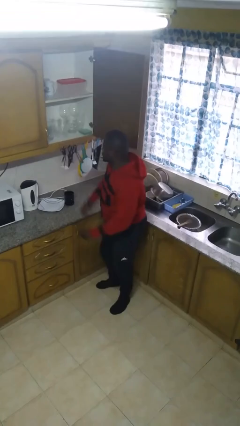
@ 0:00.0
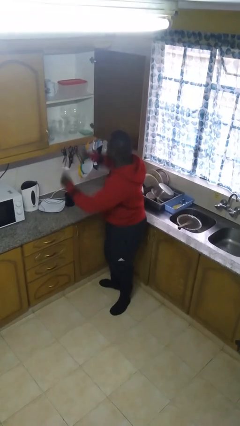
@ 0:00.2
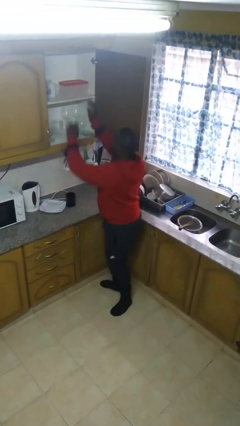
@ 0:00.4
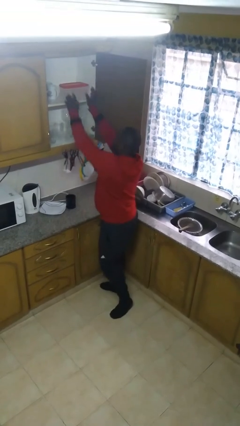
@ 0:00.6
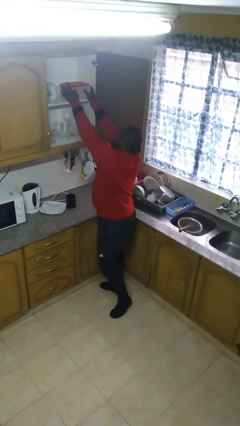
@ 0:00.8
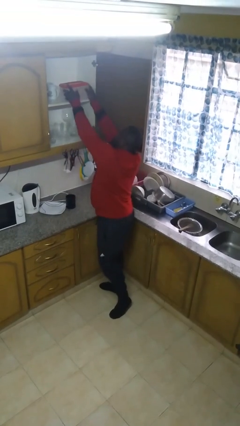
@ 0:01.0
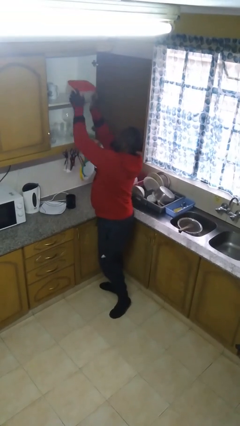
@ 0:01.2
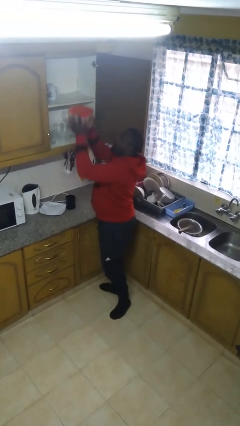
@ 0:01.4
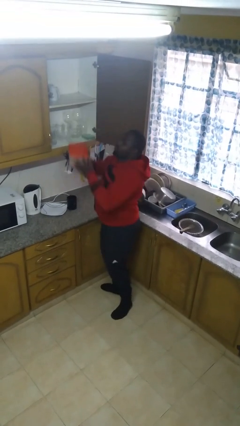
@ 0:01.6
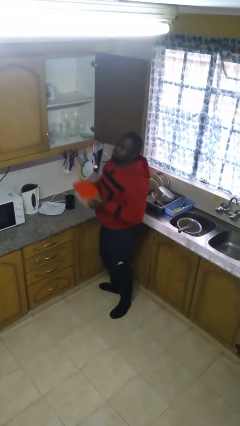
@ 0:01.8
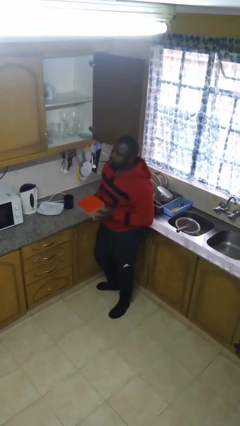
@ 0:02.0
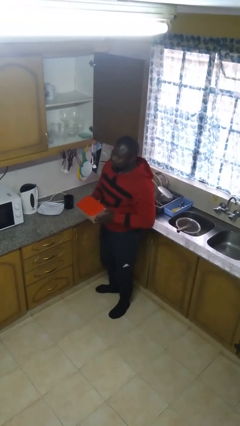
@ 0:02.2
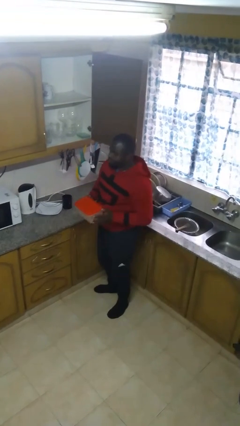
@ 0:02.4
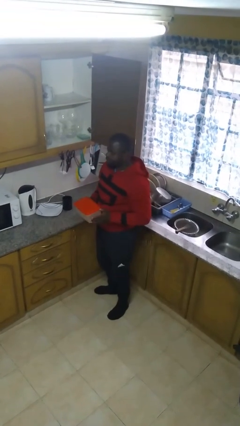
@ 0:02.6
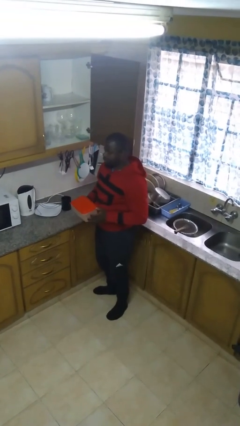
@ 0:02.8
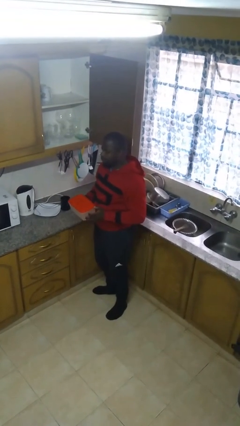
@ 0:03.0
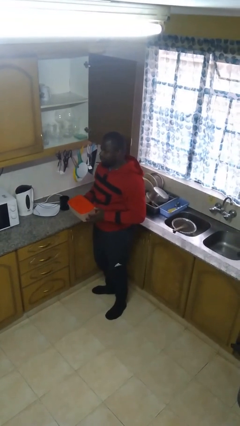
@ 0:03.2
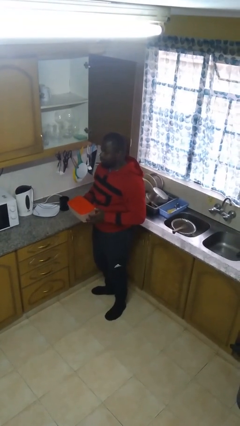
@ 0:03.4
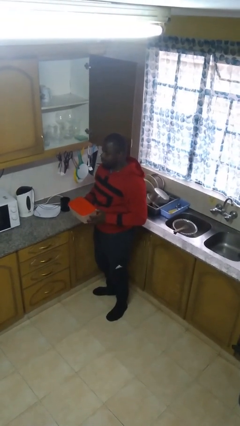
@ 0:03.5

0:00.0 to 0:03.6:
person picks up object from cabinet

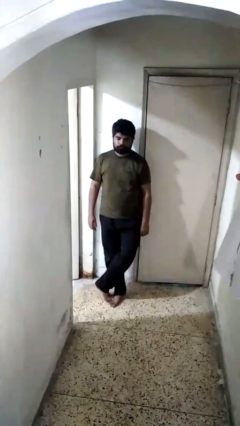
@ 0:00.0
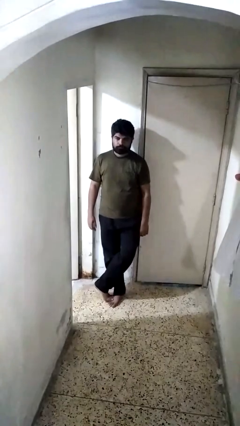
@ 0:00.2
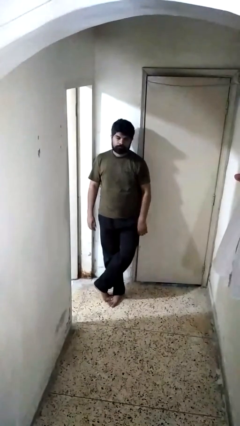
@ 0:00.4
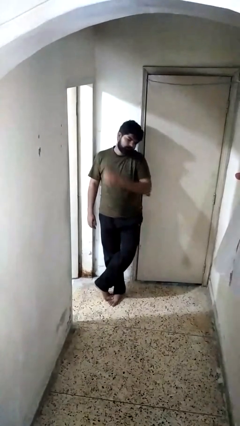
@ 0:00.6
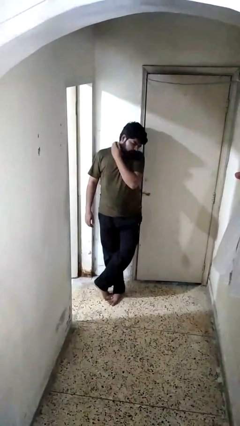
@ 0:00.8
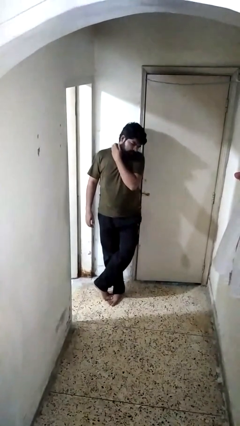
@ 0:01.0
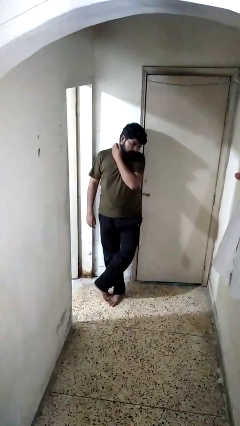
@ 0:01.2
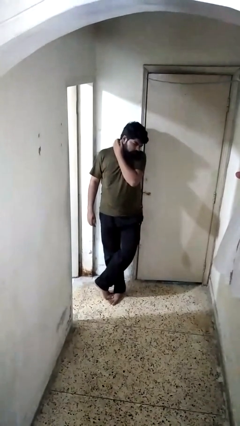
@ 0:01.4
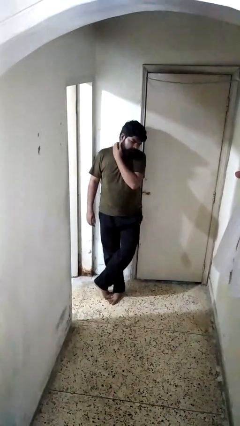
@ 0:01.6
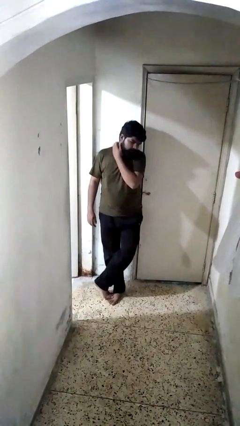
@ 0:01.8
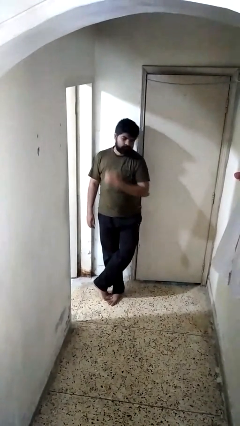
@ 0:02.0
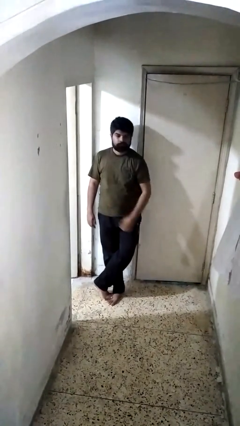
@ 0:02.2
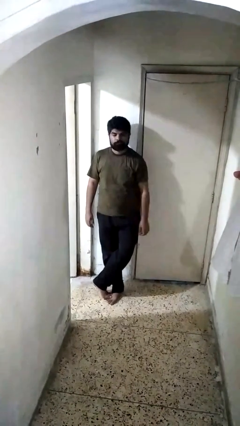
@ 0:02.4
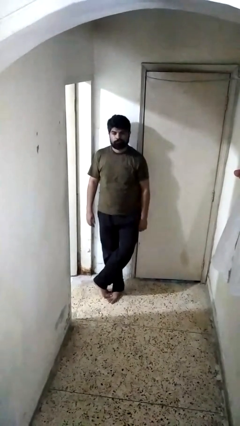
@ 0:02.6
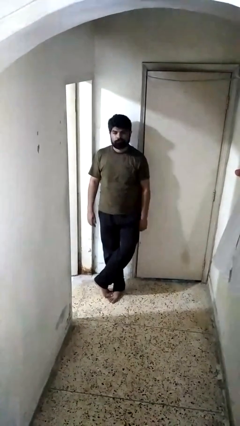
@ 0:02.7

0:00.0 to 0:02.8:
person rubs neck

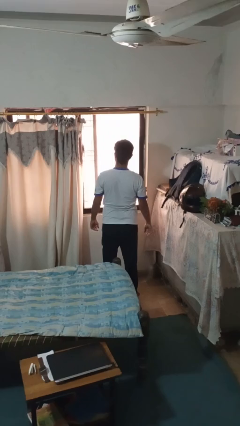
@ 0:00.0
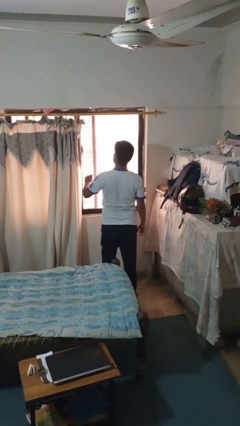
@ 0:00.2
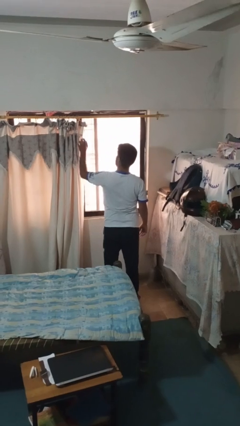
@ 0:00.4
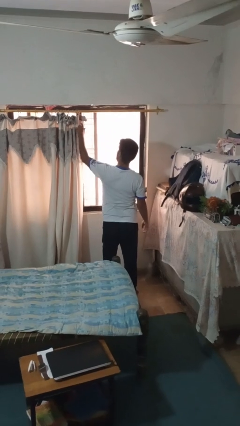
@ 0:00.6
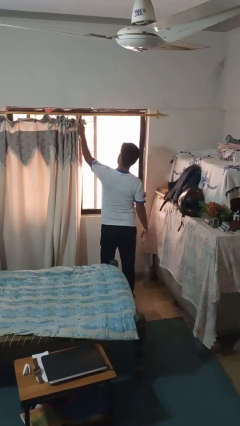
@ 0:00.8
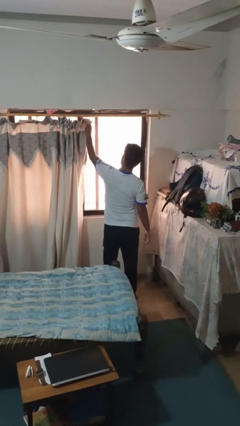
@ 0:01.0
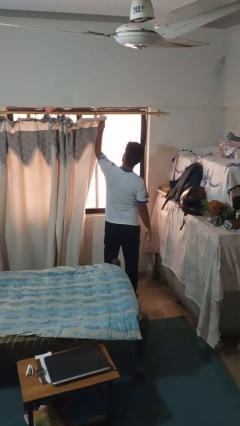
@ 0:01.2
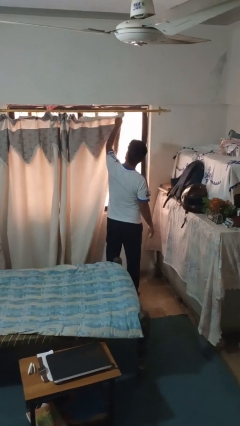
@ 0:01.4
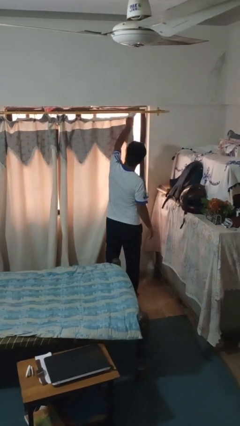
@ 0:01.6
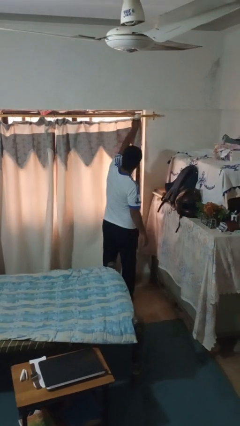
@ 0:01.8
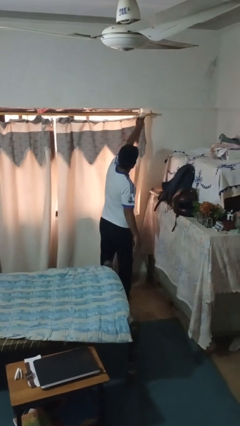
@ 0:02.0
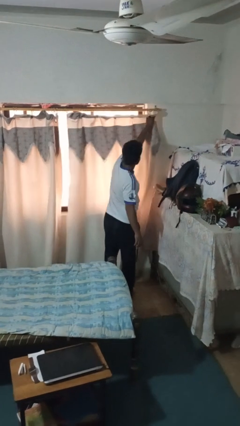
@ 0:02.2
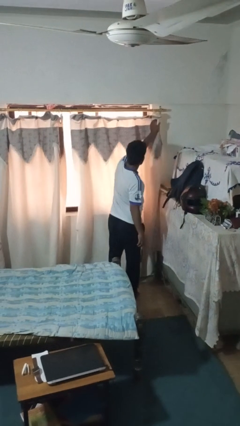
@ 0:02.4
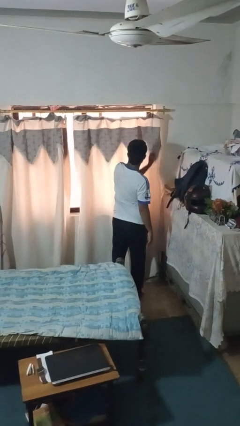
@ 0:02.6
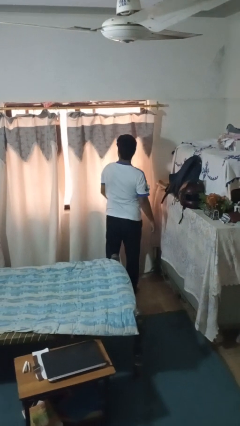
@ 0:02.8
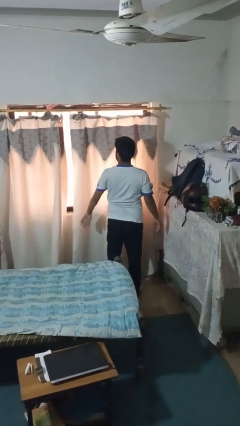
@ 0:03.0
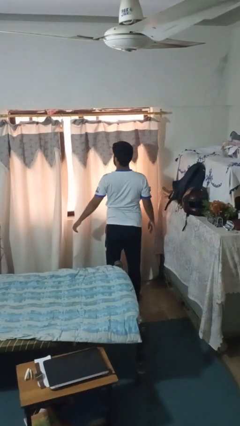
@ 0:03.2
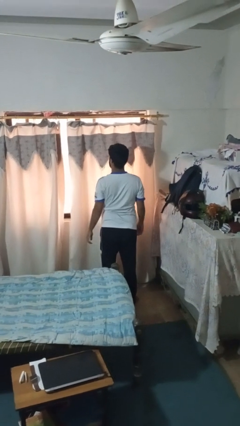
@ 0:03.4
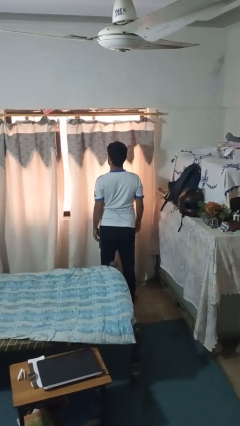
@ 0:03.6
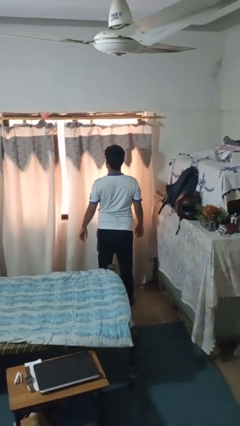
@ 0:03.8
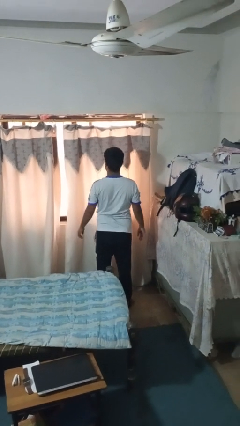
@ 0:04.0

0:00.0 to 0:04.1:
person closes curtains

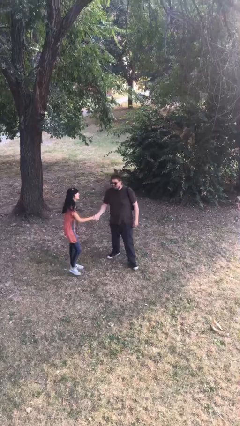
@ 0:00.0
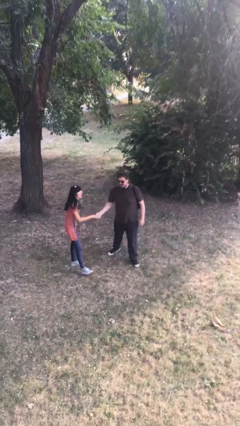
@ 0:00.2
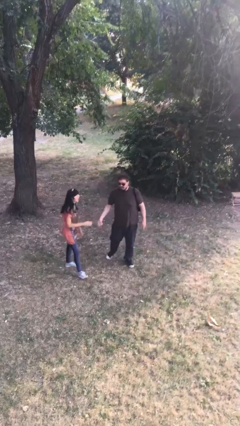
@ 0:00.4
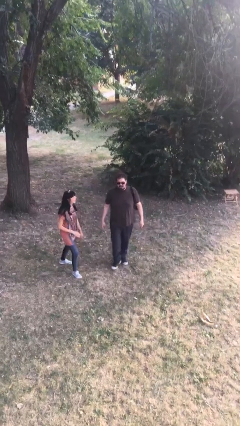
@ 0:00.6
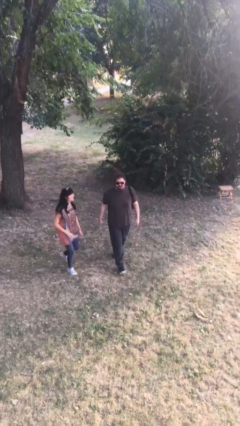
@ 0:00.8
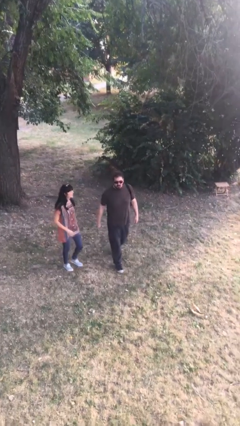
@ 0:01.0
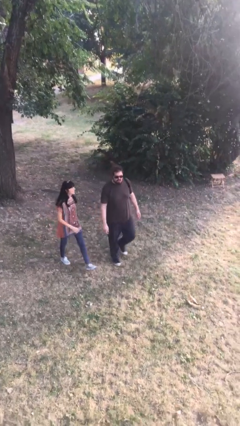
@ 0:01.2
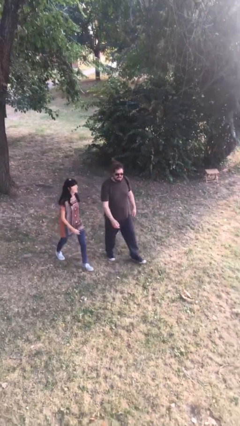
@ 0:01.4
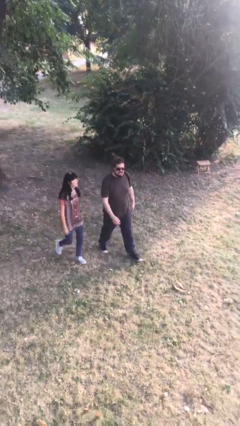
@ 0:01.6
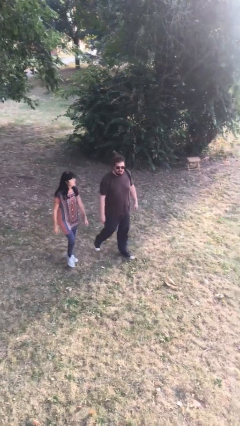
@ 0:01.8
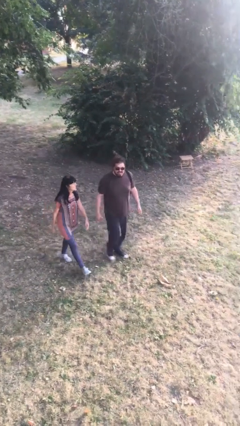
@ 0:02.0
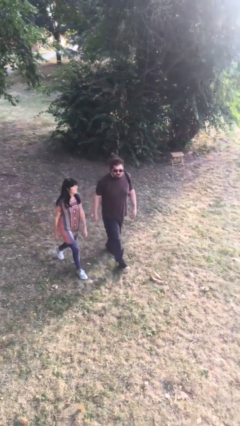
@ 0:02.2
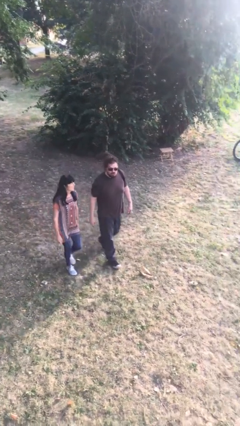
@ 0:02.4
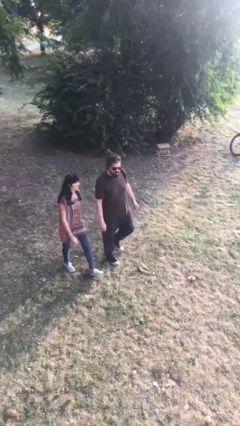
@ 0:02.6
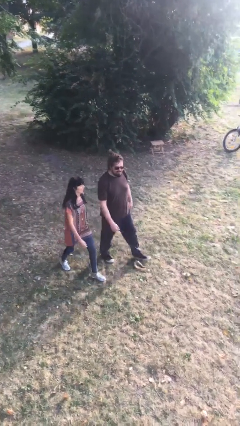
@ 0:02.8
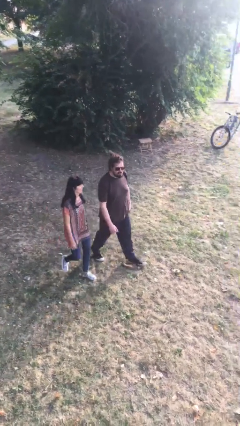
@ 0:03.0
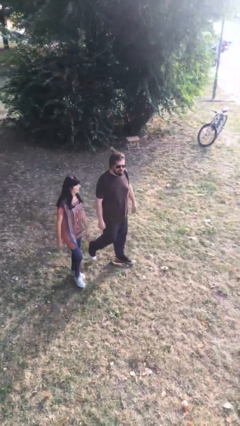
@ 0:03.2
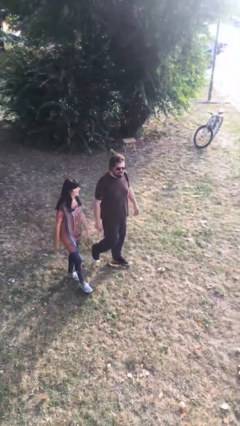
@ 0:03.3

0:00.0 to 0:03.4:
person talks to person

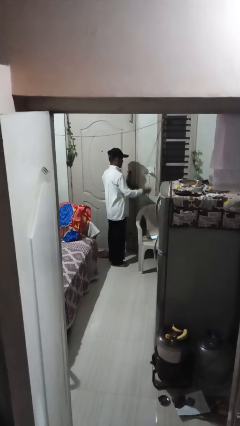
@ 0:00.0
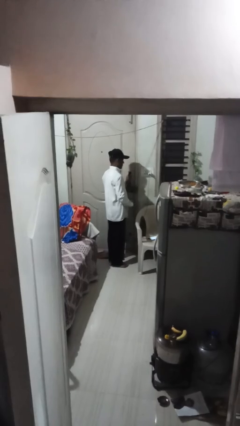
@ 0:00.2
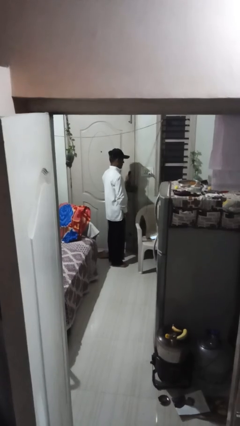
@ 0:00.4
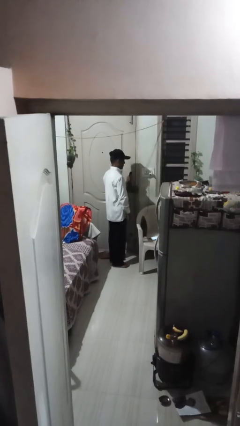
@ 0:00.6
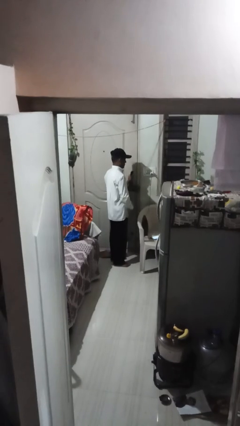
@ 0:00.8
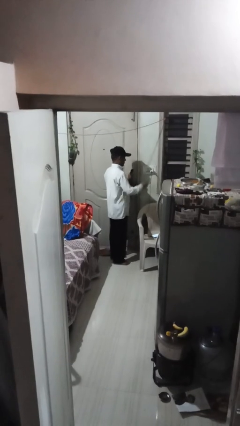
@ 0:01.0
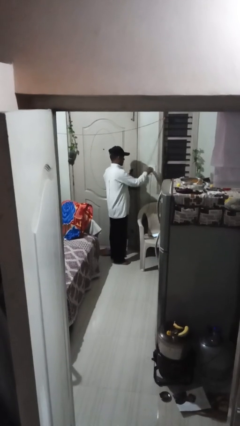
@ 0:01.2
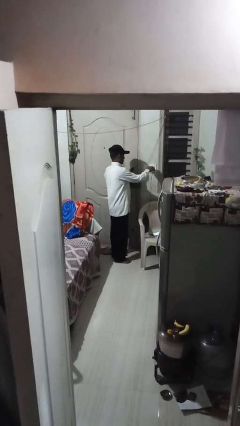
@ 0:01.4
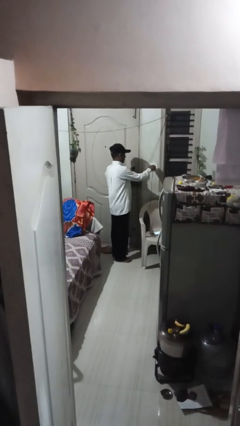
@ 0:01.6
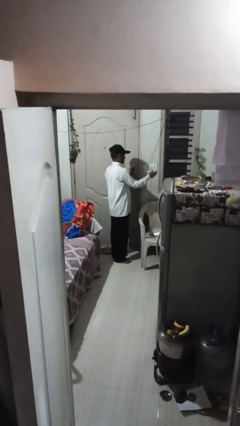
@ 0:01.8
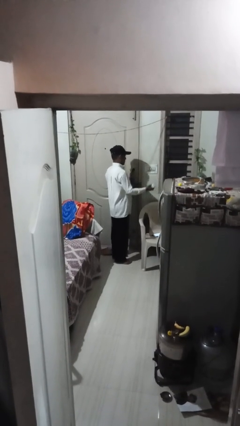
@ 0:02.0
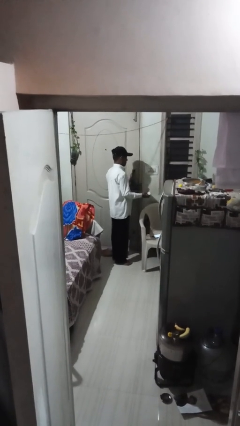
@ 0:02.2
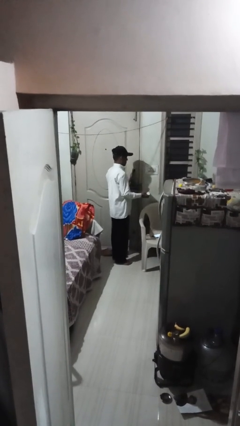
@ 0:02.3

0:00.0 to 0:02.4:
person unplugs from electrical socket

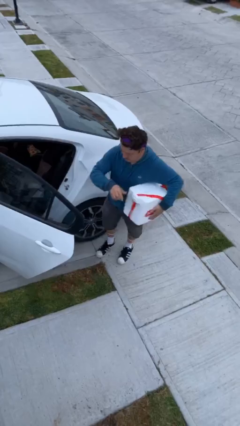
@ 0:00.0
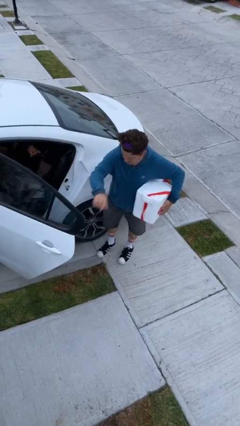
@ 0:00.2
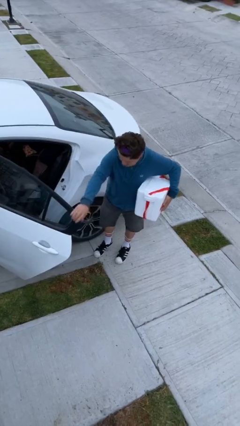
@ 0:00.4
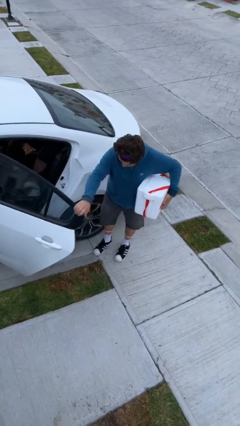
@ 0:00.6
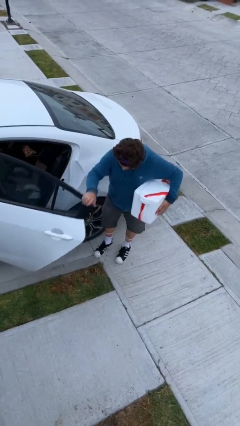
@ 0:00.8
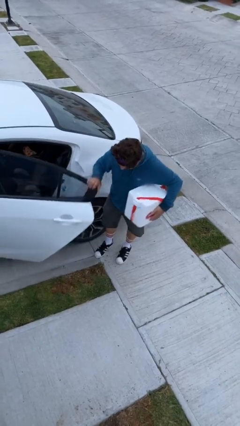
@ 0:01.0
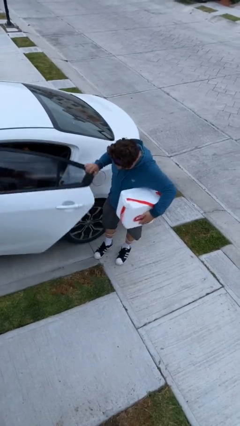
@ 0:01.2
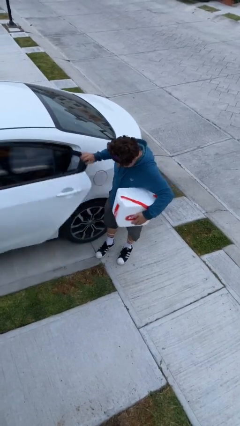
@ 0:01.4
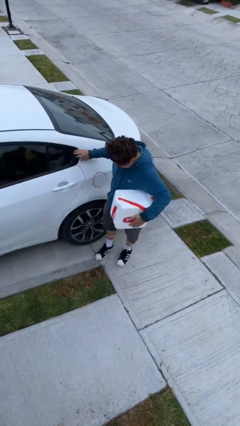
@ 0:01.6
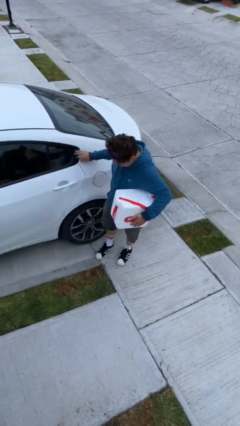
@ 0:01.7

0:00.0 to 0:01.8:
person closes car door
